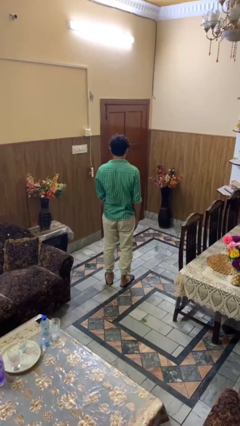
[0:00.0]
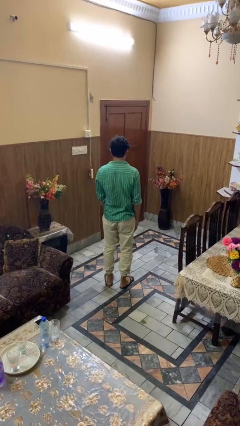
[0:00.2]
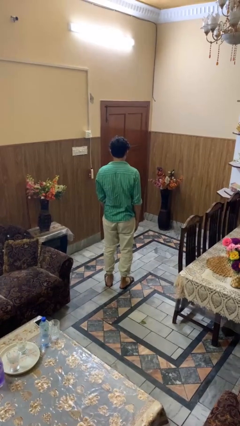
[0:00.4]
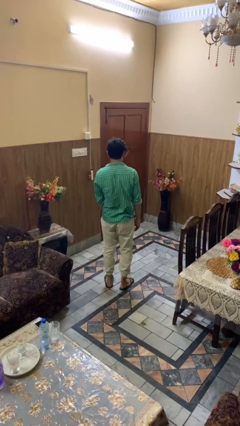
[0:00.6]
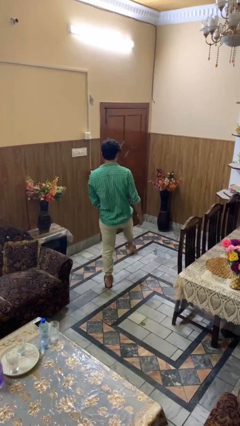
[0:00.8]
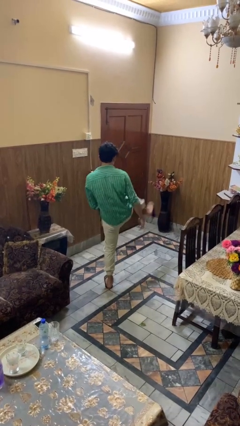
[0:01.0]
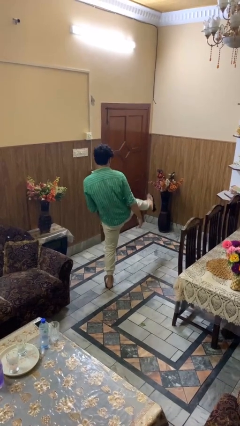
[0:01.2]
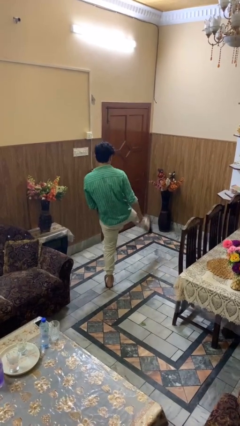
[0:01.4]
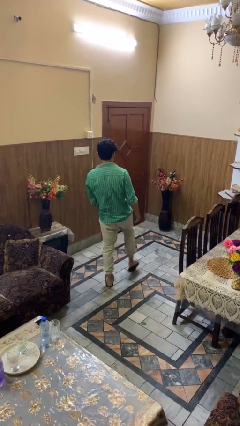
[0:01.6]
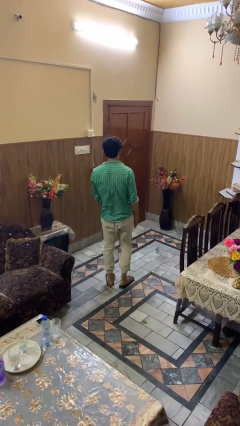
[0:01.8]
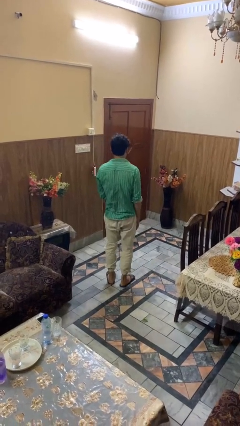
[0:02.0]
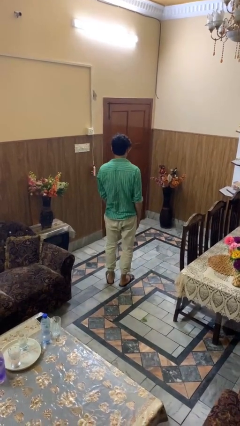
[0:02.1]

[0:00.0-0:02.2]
person karate kicks

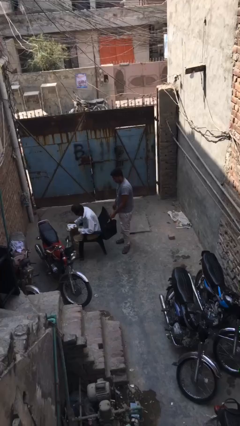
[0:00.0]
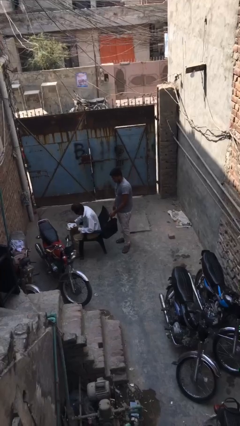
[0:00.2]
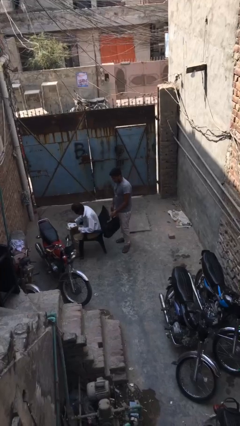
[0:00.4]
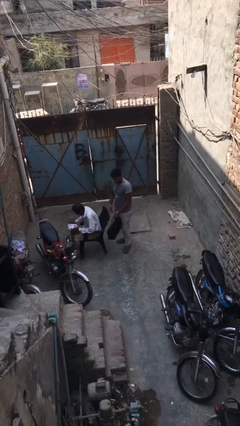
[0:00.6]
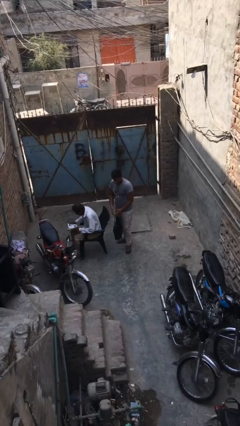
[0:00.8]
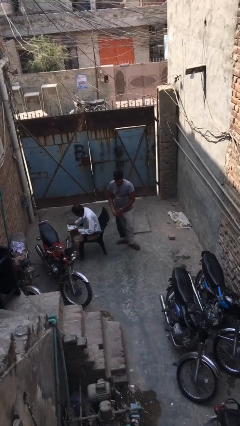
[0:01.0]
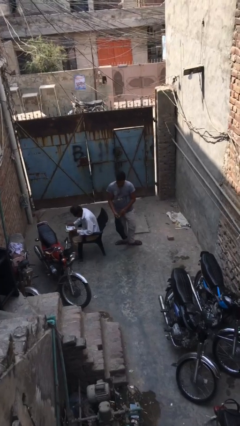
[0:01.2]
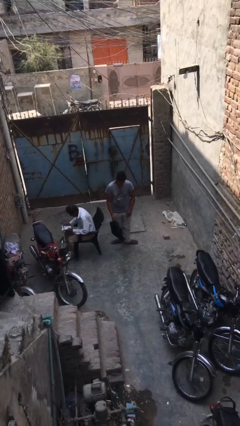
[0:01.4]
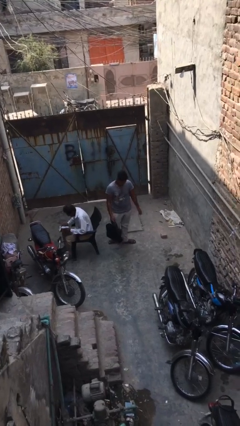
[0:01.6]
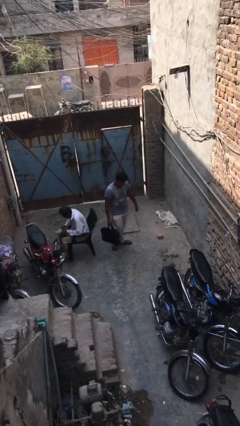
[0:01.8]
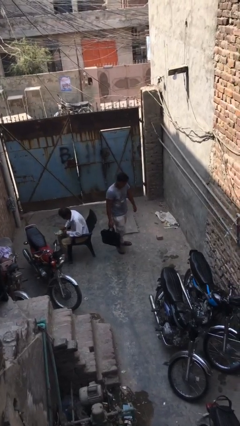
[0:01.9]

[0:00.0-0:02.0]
person steals object from person

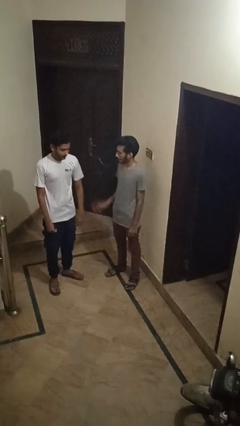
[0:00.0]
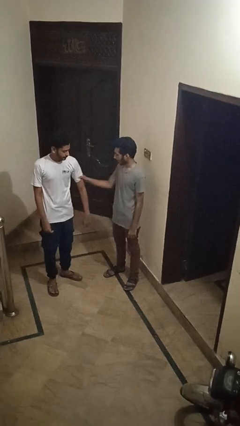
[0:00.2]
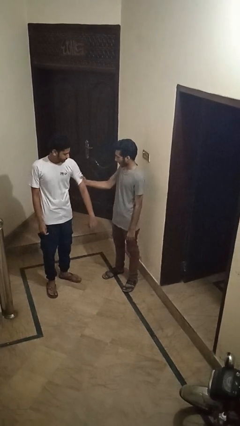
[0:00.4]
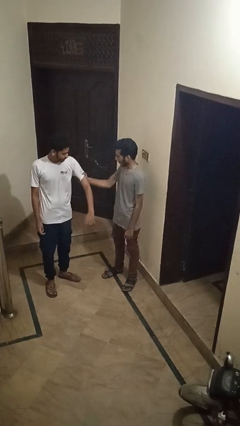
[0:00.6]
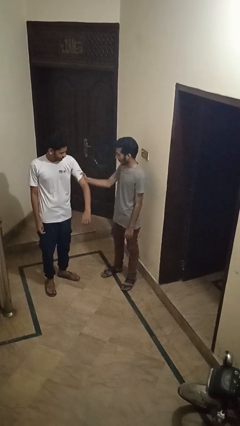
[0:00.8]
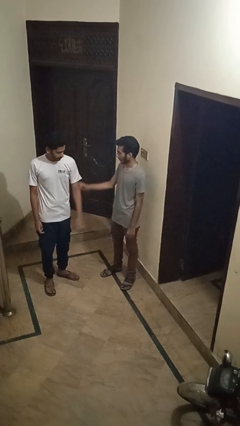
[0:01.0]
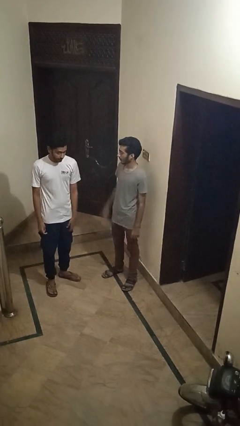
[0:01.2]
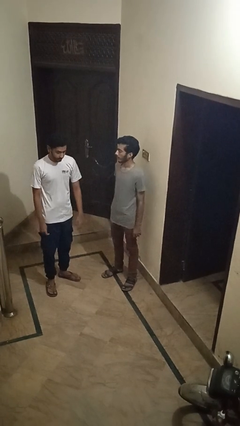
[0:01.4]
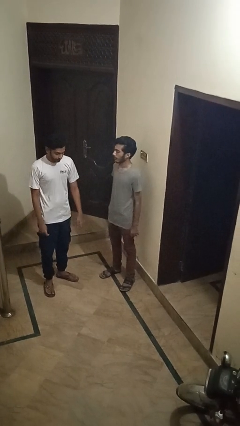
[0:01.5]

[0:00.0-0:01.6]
person grabs person by bicep

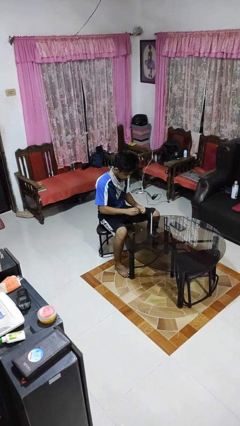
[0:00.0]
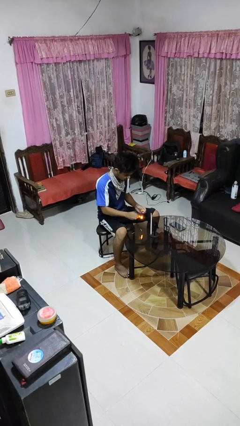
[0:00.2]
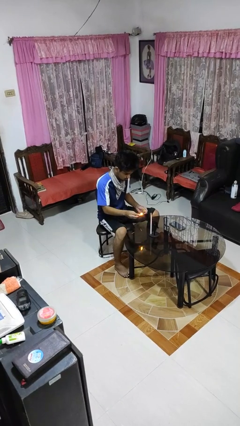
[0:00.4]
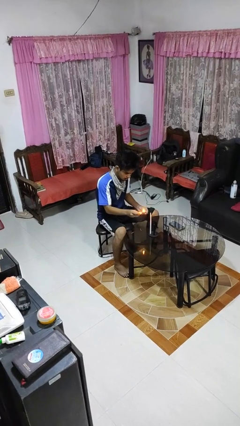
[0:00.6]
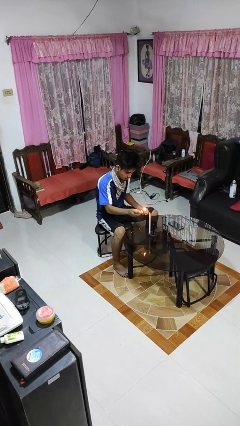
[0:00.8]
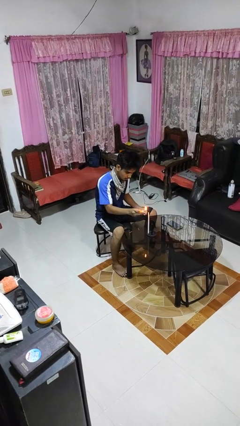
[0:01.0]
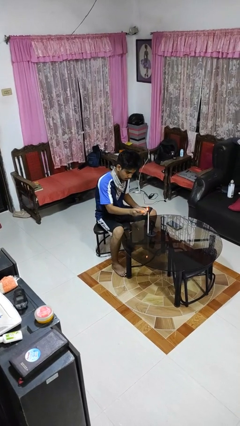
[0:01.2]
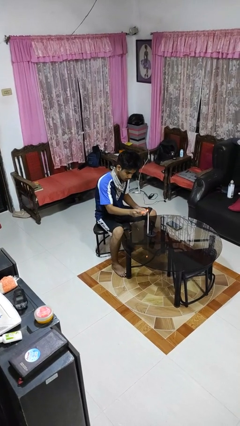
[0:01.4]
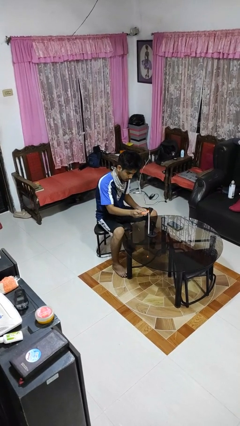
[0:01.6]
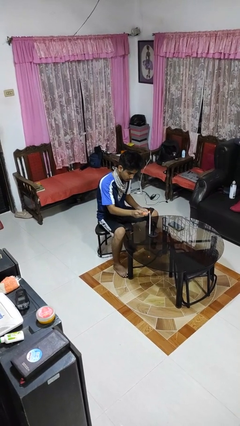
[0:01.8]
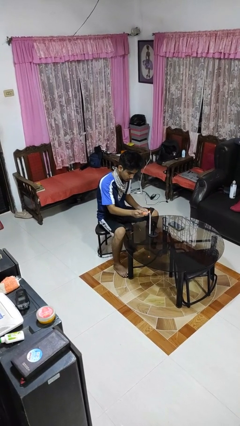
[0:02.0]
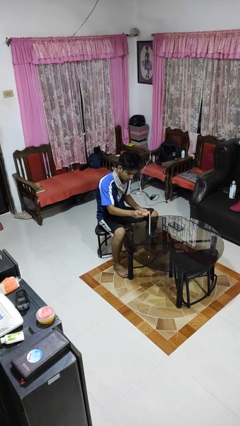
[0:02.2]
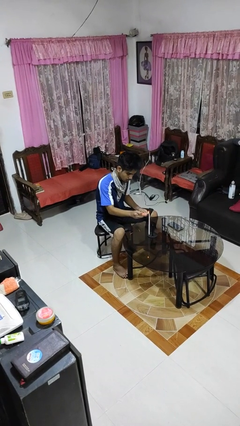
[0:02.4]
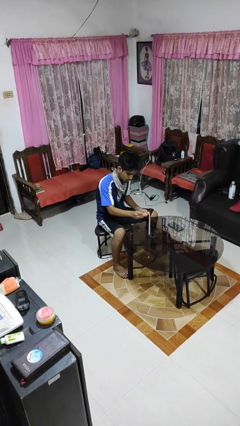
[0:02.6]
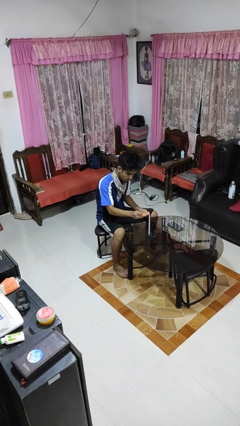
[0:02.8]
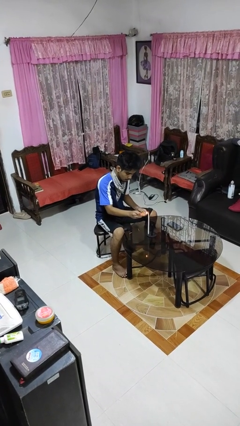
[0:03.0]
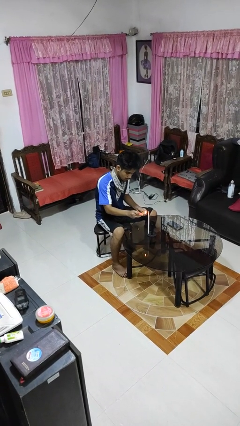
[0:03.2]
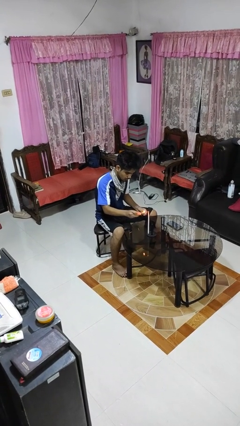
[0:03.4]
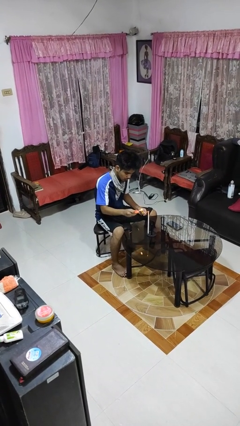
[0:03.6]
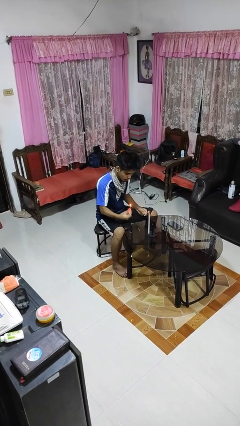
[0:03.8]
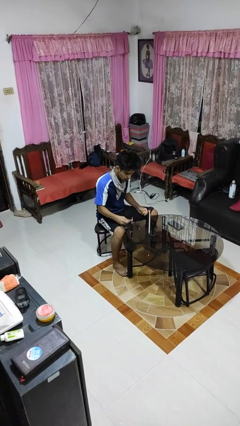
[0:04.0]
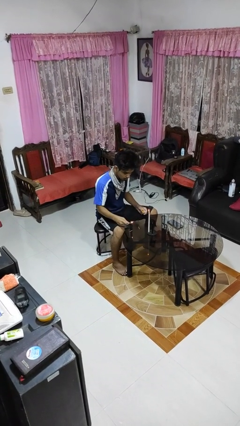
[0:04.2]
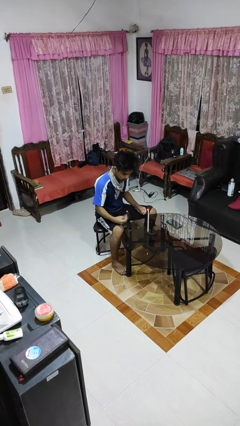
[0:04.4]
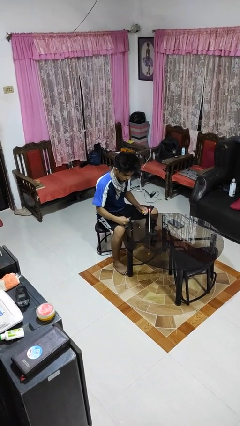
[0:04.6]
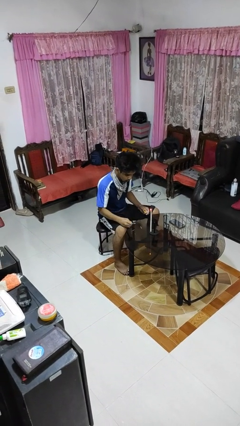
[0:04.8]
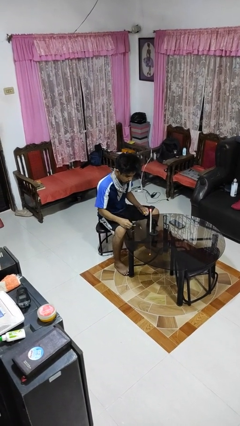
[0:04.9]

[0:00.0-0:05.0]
person lights candle

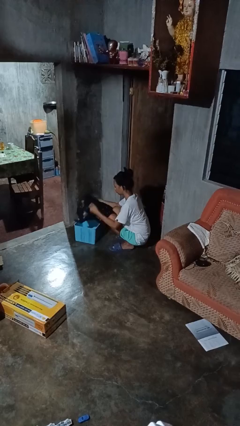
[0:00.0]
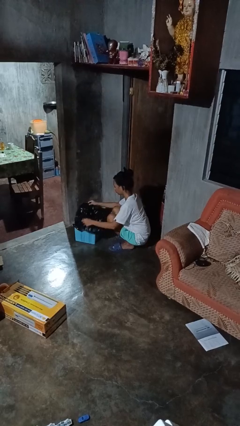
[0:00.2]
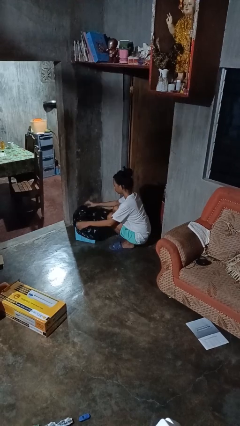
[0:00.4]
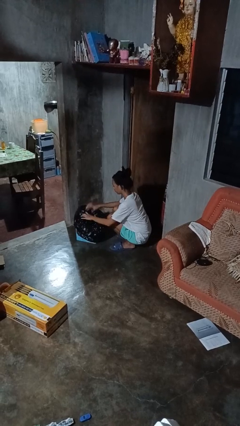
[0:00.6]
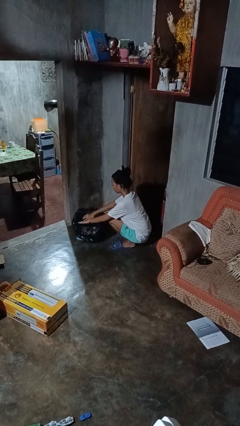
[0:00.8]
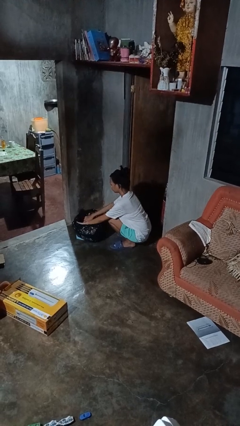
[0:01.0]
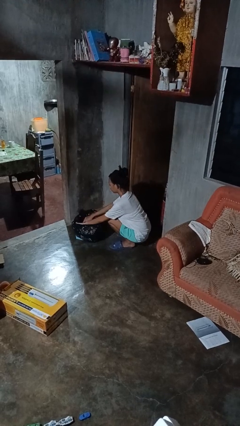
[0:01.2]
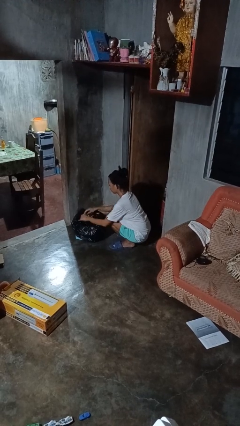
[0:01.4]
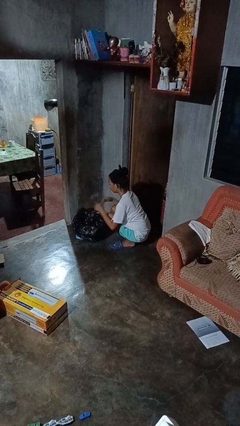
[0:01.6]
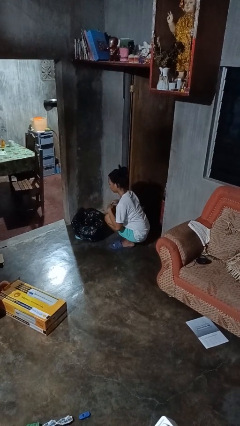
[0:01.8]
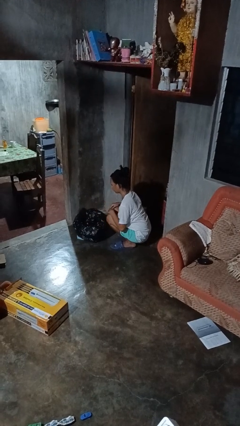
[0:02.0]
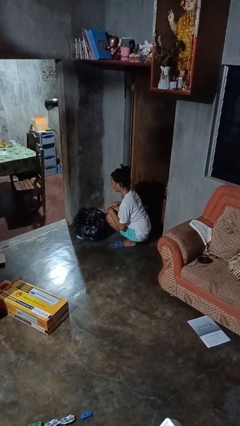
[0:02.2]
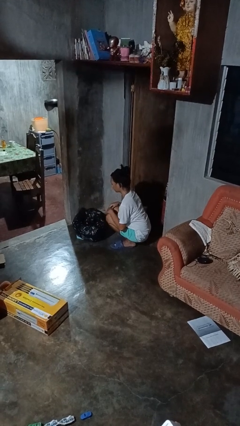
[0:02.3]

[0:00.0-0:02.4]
person inserts trashbag into trashcan

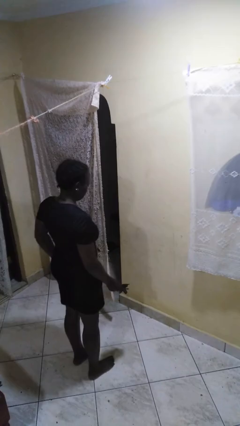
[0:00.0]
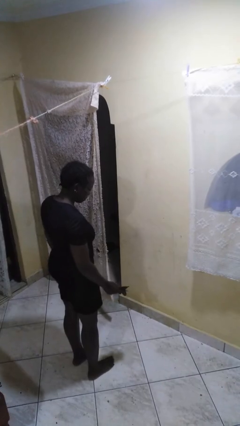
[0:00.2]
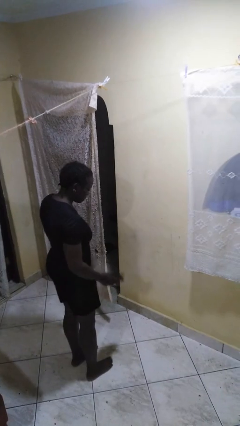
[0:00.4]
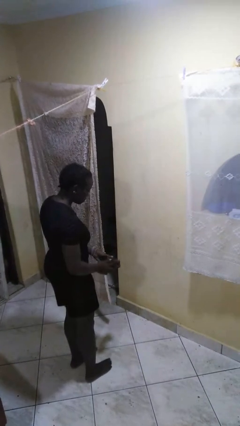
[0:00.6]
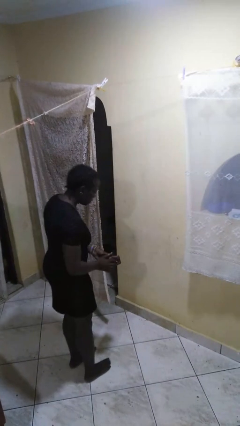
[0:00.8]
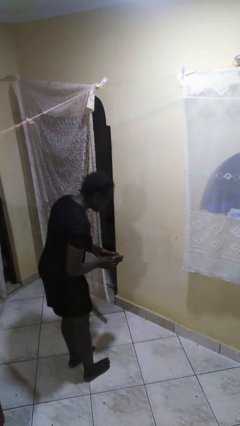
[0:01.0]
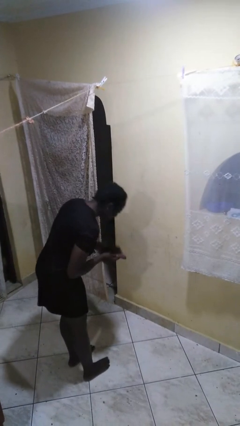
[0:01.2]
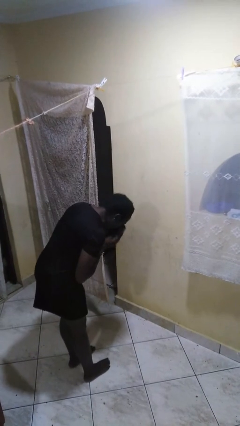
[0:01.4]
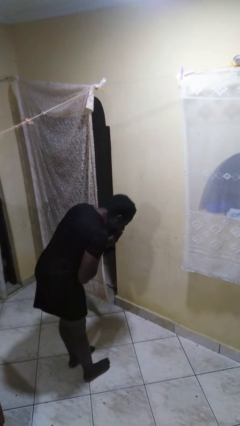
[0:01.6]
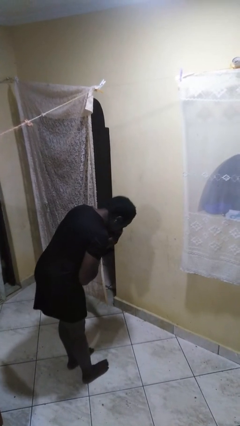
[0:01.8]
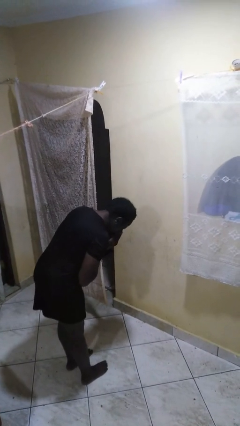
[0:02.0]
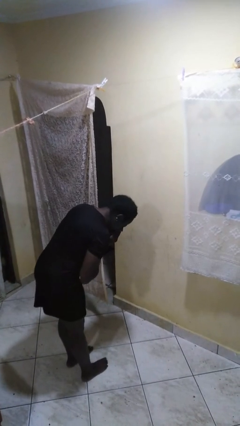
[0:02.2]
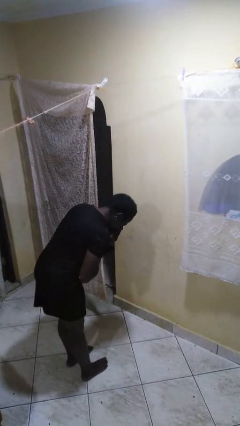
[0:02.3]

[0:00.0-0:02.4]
person blows nose

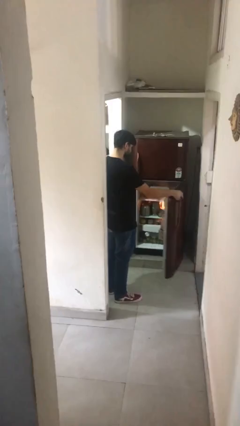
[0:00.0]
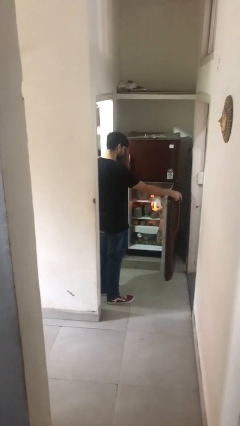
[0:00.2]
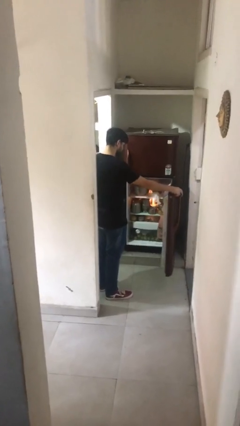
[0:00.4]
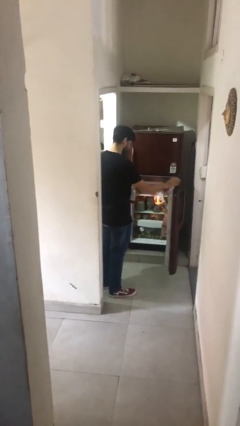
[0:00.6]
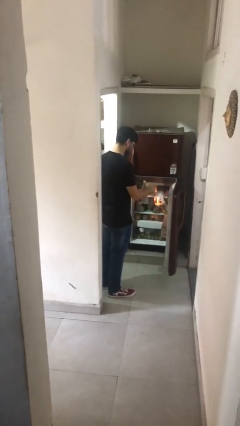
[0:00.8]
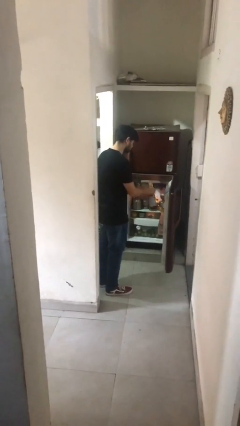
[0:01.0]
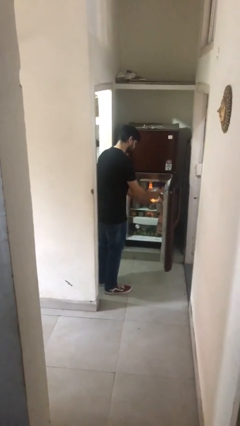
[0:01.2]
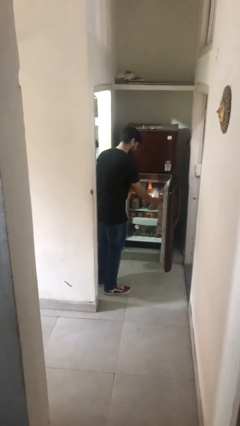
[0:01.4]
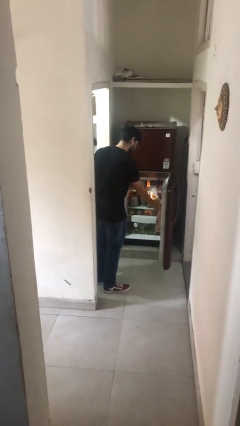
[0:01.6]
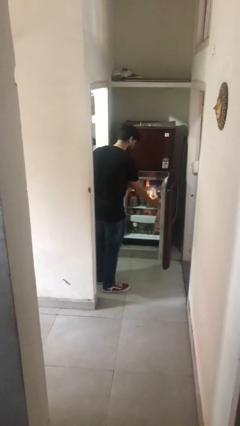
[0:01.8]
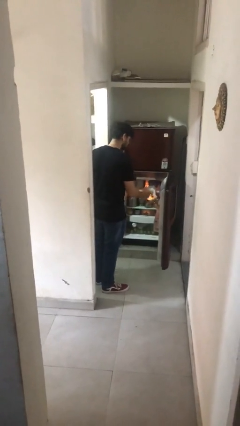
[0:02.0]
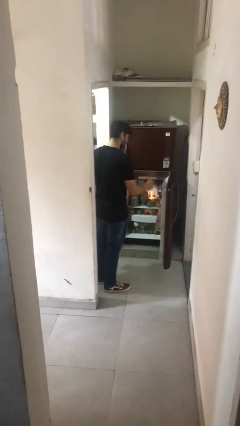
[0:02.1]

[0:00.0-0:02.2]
person puts object into refrigerator
